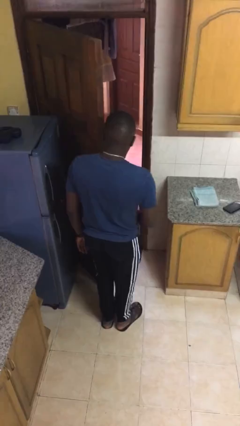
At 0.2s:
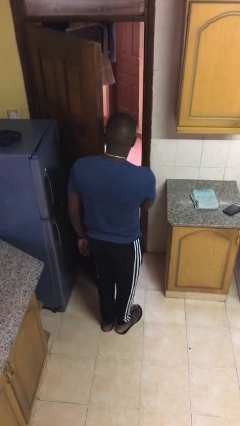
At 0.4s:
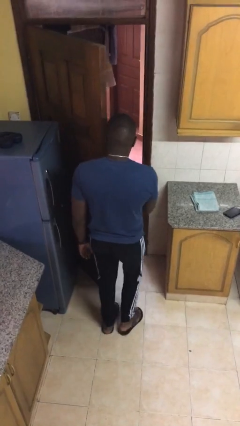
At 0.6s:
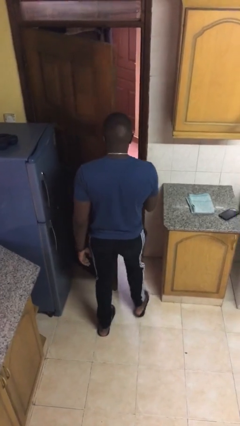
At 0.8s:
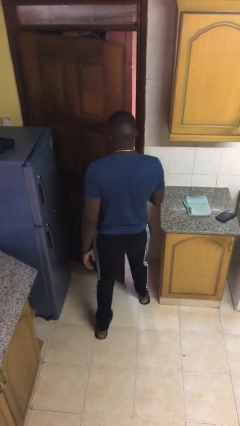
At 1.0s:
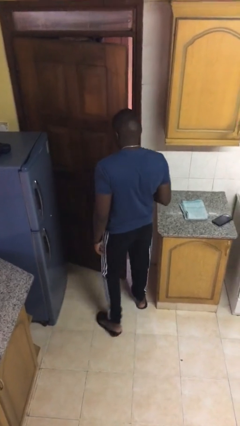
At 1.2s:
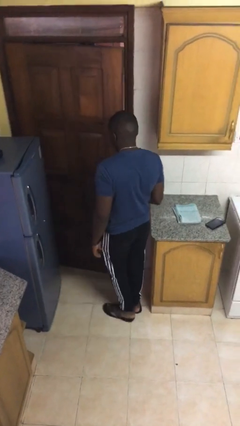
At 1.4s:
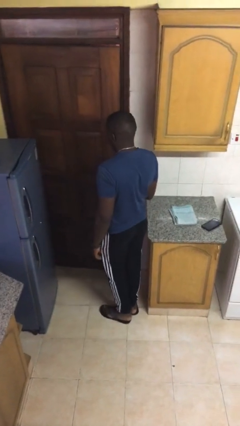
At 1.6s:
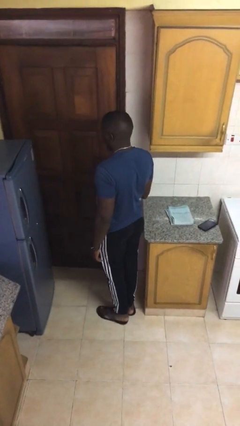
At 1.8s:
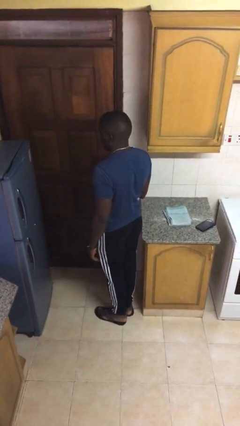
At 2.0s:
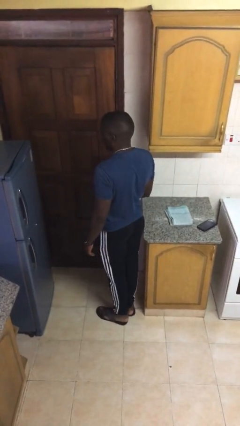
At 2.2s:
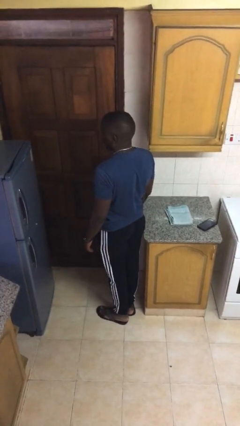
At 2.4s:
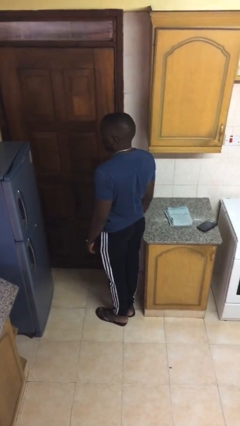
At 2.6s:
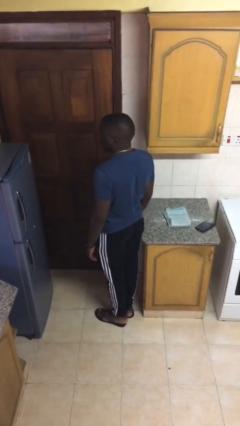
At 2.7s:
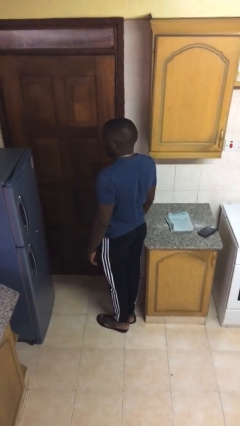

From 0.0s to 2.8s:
person closes facility door

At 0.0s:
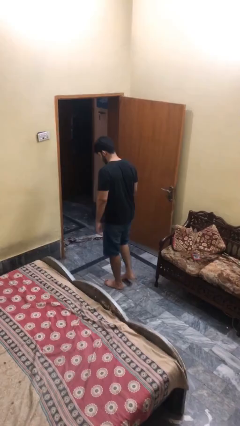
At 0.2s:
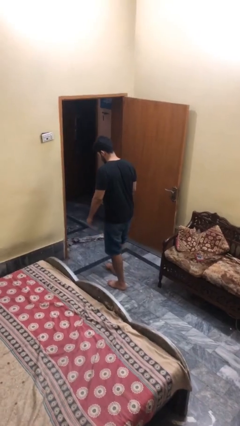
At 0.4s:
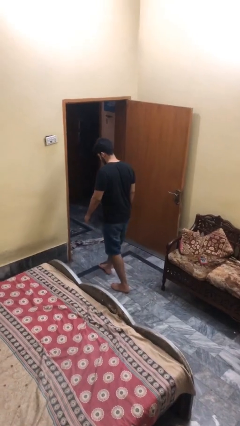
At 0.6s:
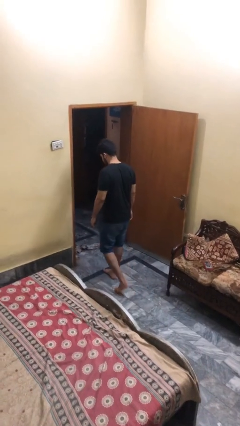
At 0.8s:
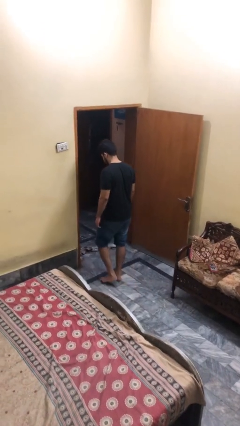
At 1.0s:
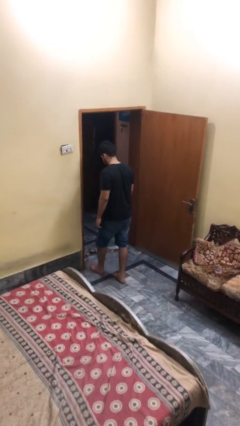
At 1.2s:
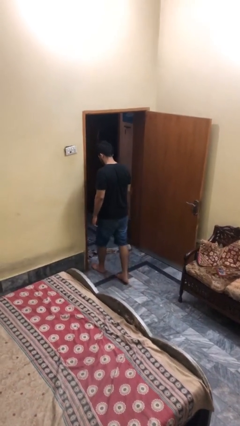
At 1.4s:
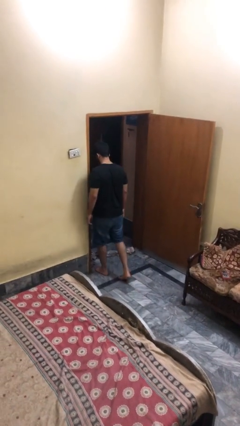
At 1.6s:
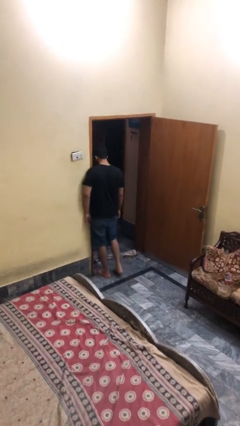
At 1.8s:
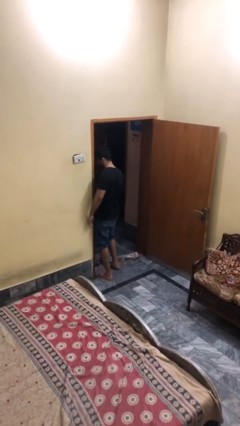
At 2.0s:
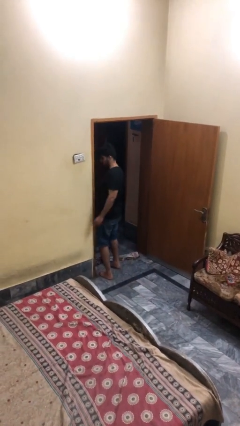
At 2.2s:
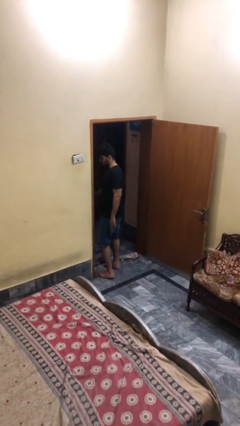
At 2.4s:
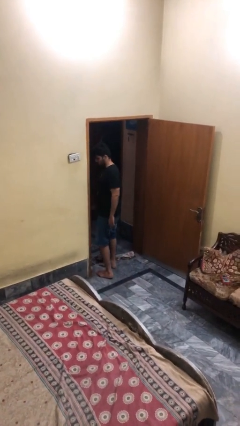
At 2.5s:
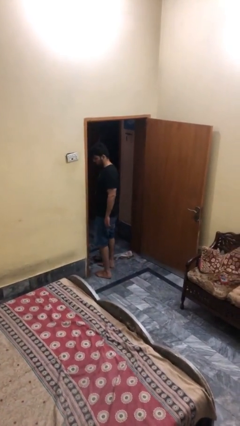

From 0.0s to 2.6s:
person bumps into wall

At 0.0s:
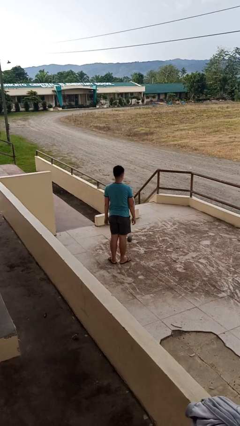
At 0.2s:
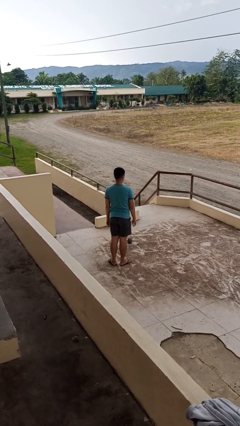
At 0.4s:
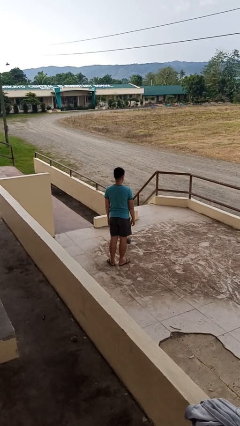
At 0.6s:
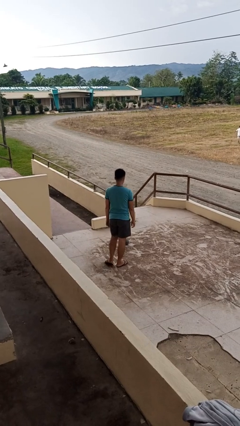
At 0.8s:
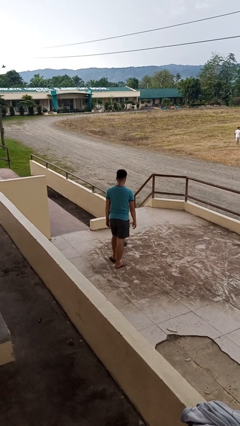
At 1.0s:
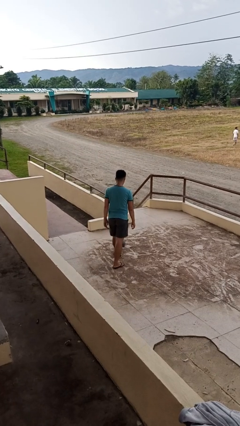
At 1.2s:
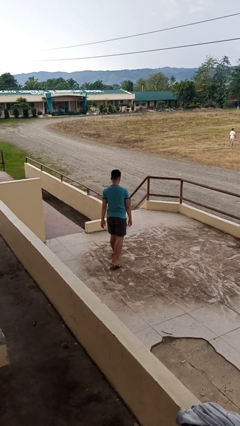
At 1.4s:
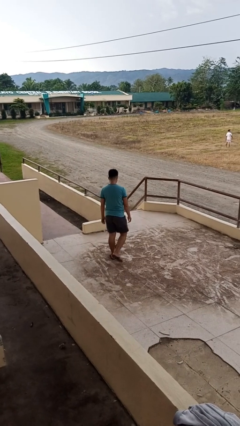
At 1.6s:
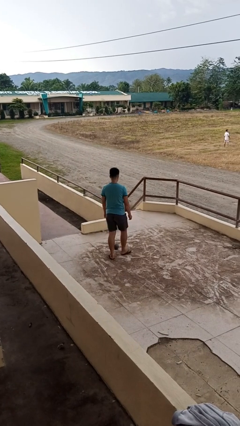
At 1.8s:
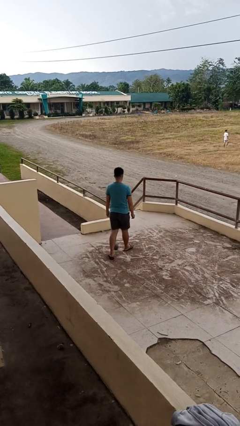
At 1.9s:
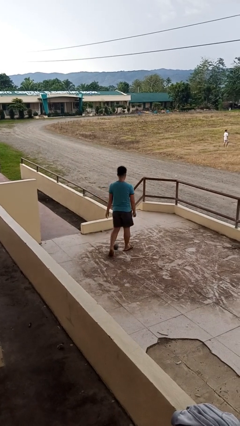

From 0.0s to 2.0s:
person trips on object on floor

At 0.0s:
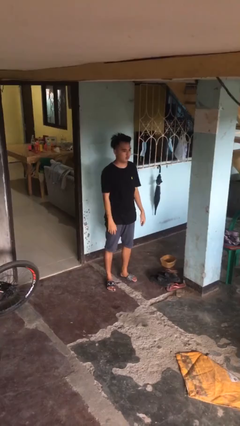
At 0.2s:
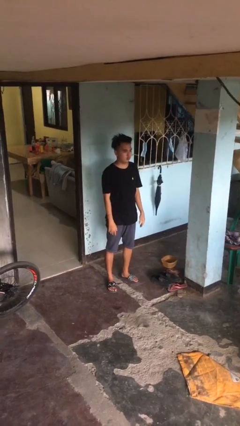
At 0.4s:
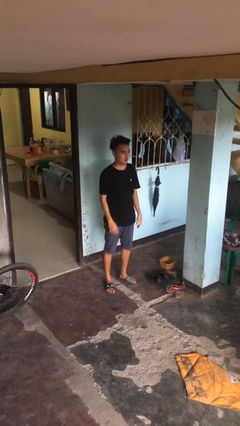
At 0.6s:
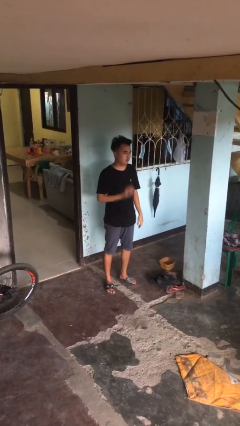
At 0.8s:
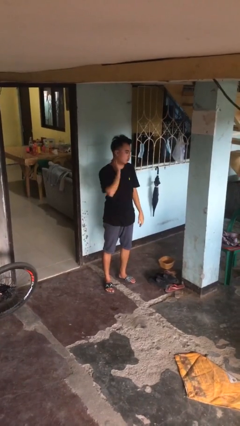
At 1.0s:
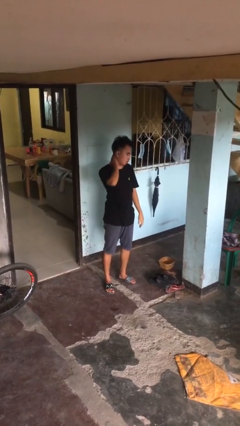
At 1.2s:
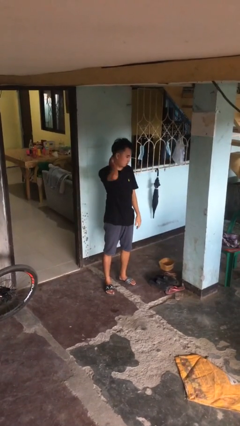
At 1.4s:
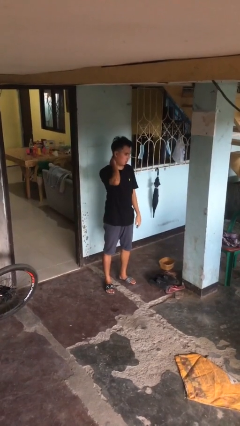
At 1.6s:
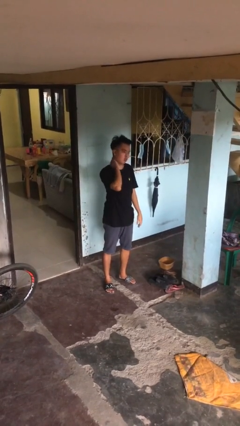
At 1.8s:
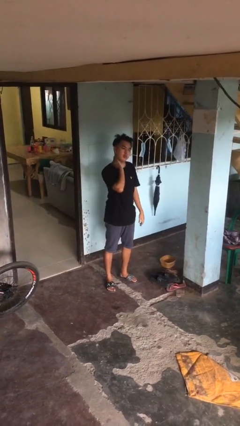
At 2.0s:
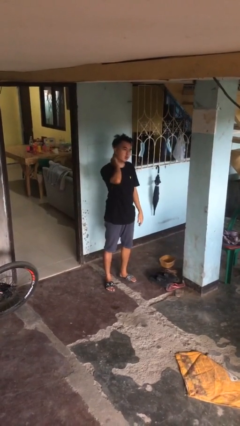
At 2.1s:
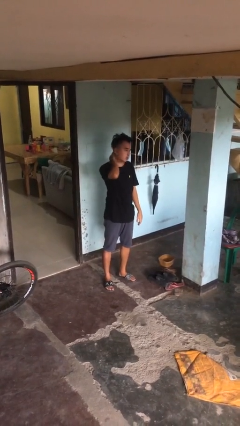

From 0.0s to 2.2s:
person rubs neck

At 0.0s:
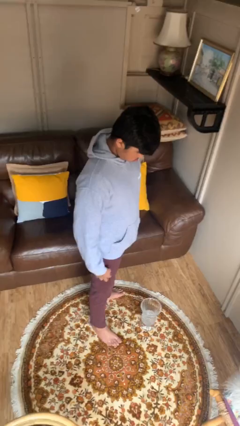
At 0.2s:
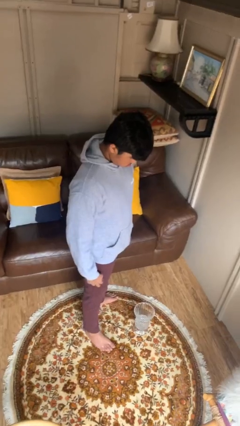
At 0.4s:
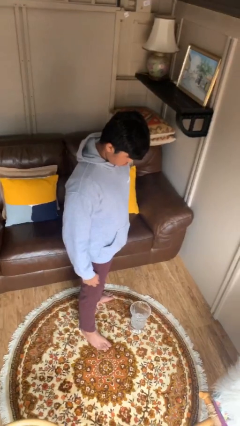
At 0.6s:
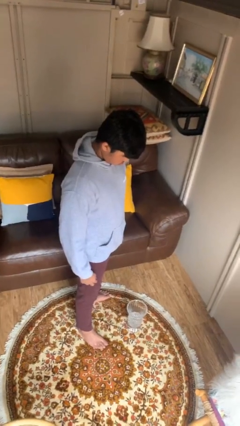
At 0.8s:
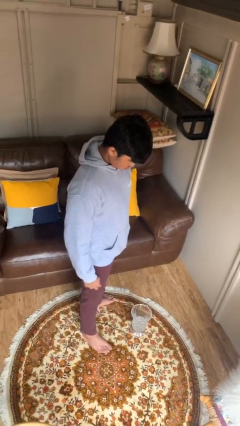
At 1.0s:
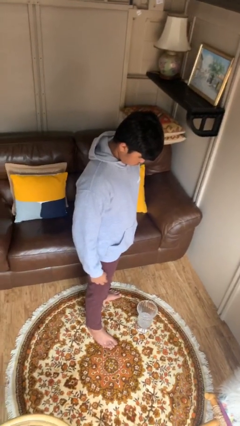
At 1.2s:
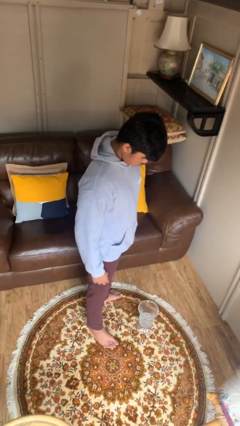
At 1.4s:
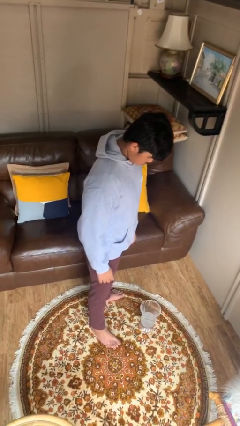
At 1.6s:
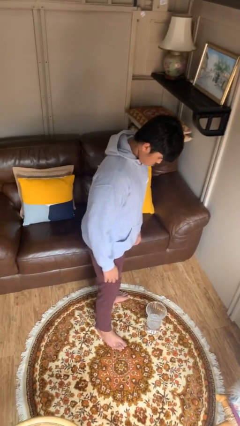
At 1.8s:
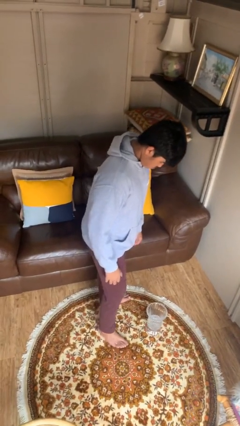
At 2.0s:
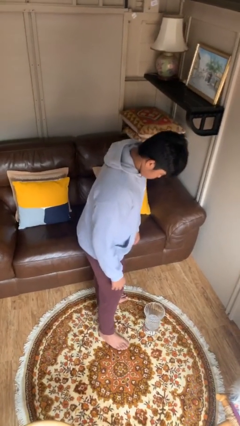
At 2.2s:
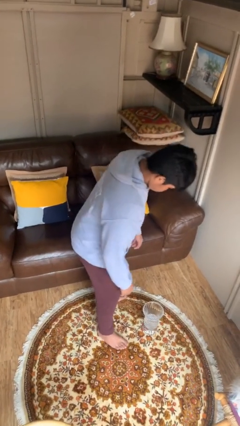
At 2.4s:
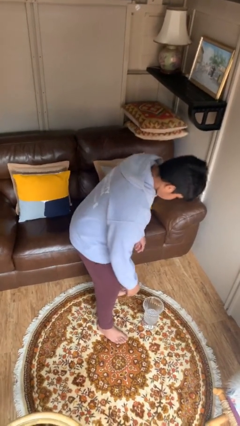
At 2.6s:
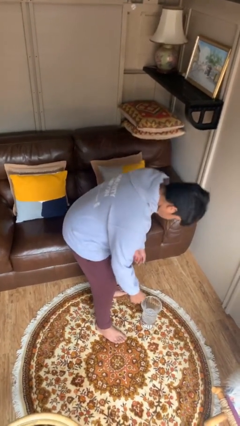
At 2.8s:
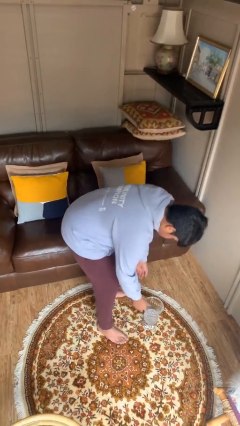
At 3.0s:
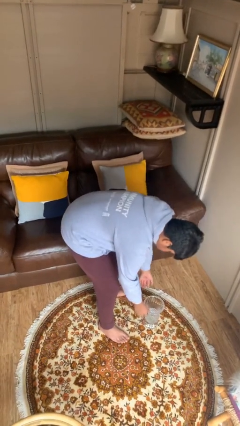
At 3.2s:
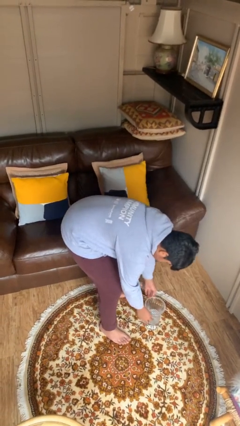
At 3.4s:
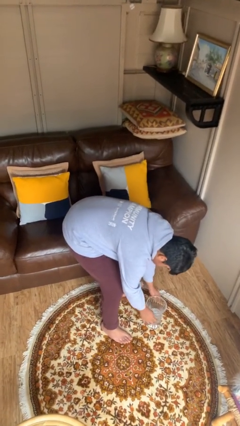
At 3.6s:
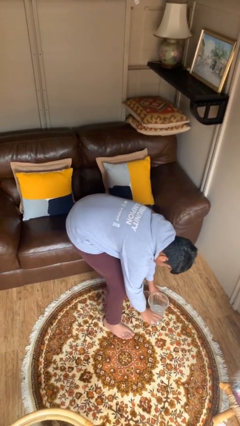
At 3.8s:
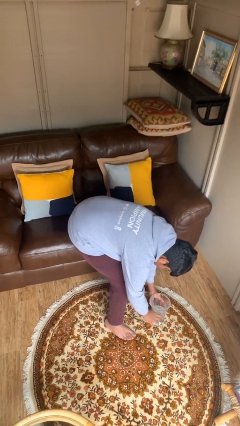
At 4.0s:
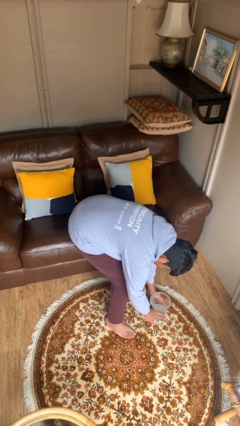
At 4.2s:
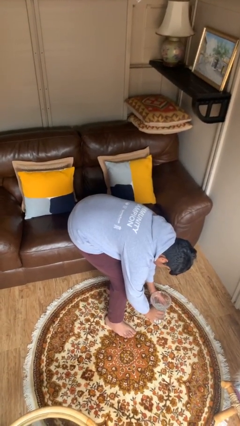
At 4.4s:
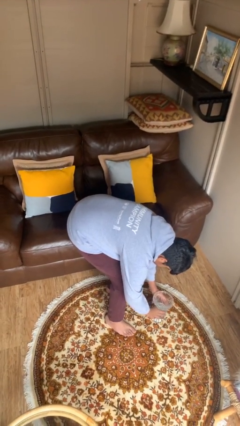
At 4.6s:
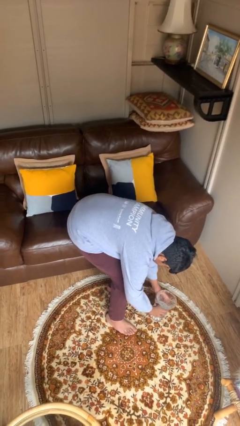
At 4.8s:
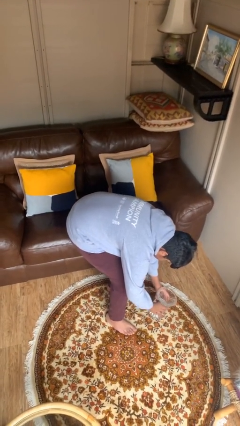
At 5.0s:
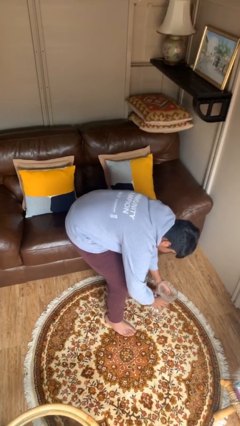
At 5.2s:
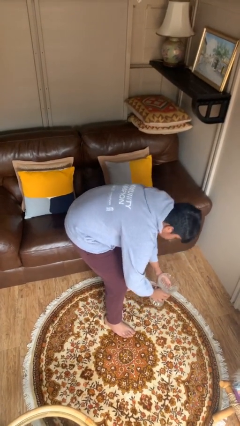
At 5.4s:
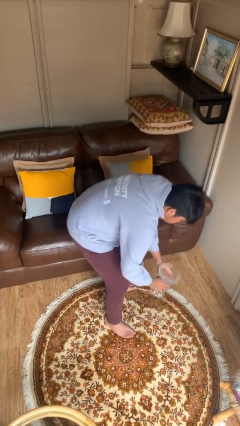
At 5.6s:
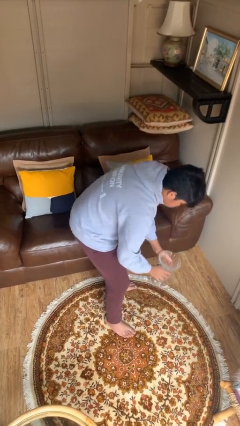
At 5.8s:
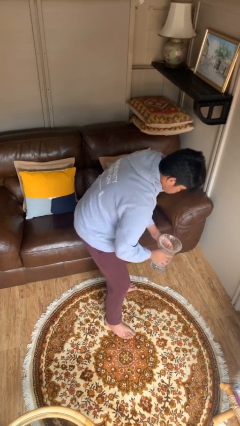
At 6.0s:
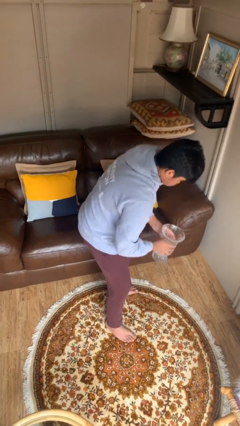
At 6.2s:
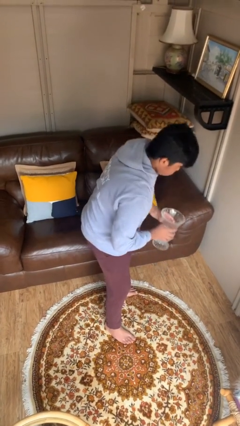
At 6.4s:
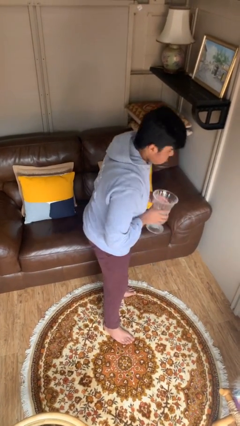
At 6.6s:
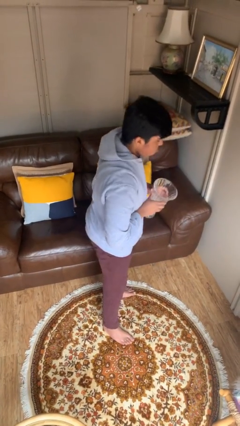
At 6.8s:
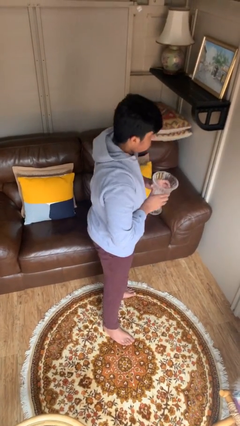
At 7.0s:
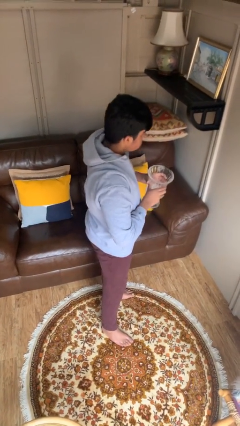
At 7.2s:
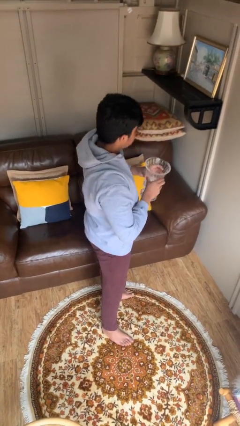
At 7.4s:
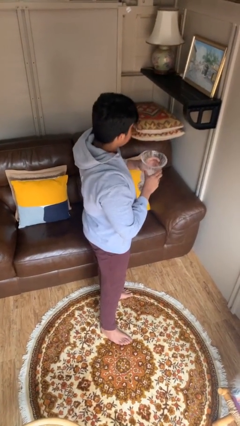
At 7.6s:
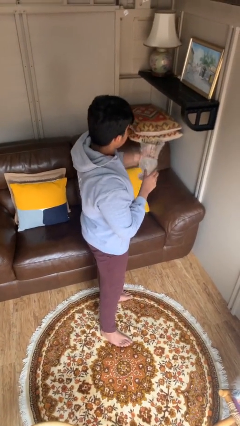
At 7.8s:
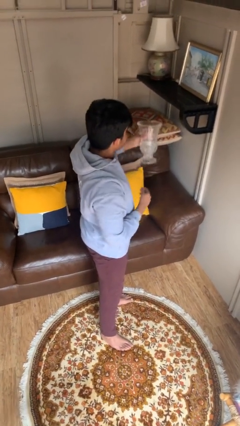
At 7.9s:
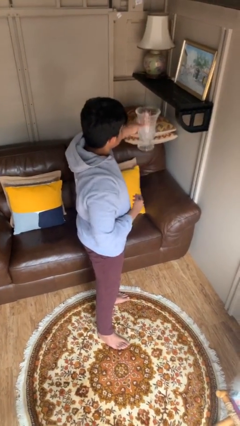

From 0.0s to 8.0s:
person picks up object from floor

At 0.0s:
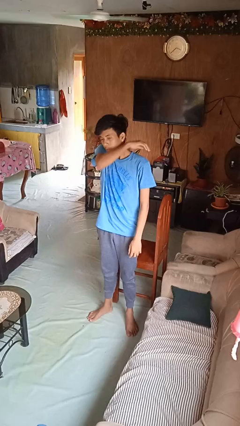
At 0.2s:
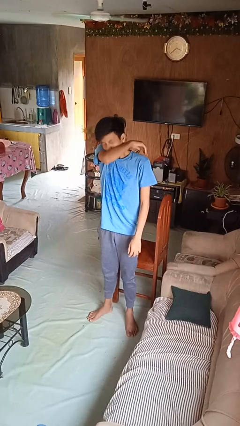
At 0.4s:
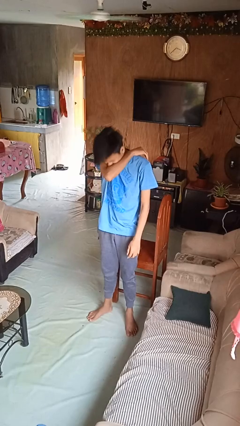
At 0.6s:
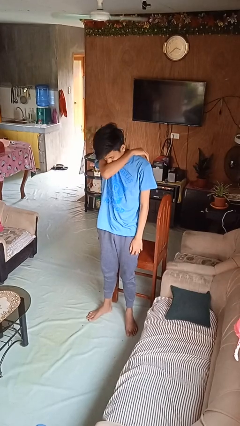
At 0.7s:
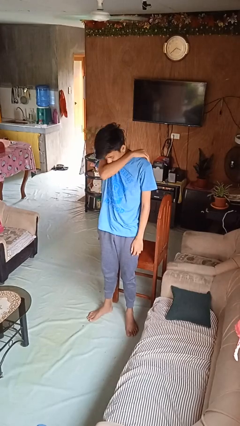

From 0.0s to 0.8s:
person sneezes into arm
